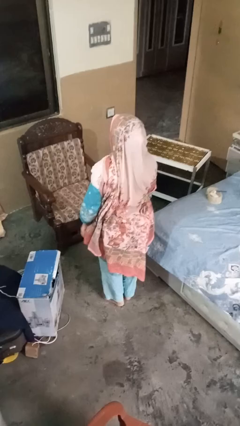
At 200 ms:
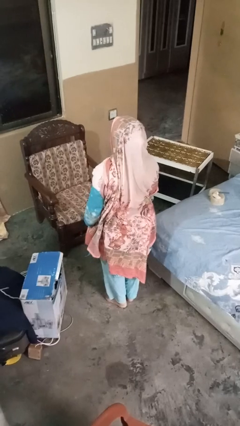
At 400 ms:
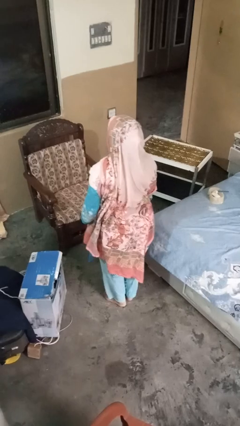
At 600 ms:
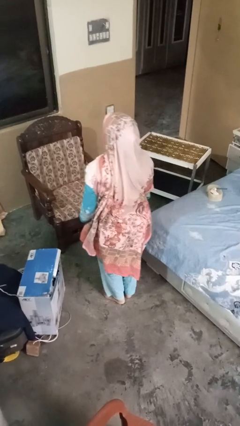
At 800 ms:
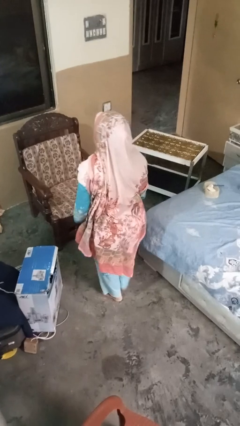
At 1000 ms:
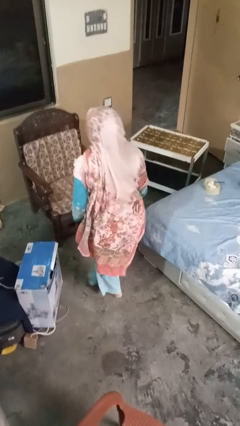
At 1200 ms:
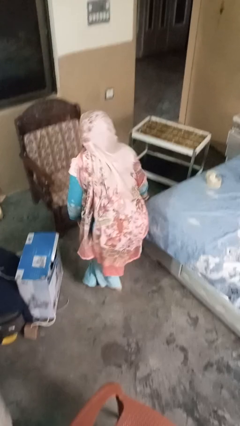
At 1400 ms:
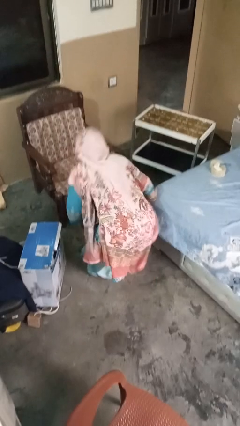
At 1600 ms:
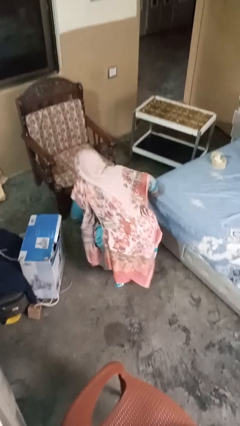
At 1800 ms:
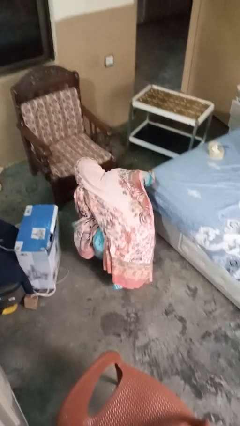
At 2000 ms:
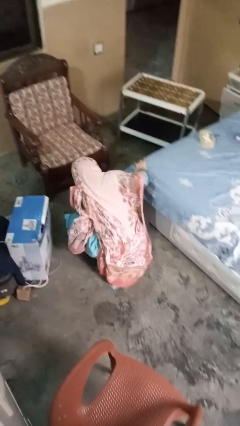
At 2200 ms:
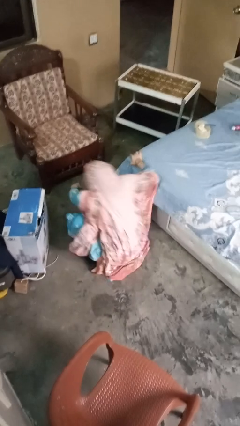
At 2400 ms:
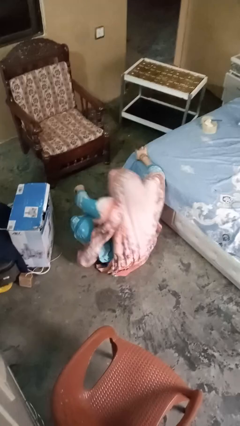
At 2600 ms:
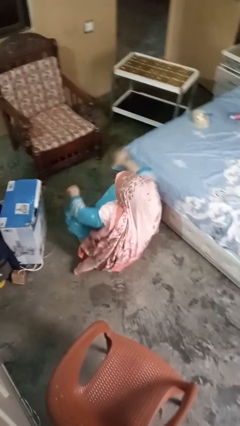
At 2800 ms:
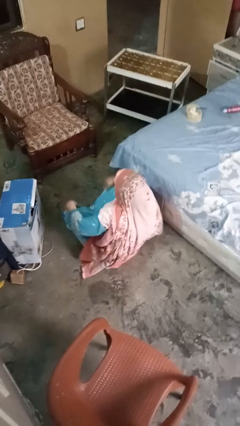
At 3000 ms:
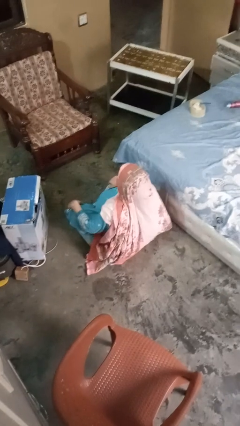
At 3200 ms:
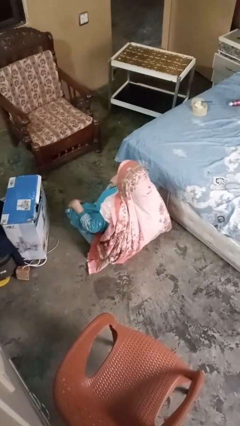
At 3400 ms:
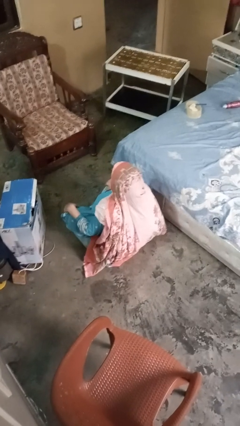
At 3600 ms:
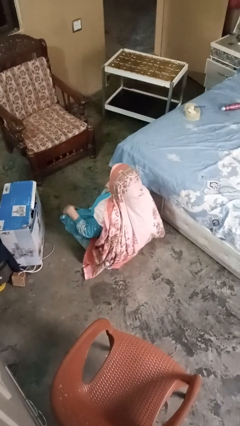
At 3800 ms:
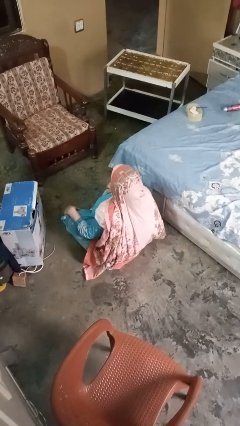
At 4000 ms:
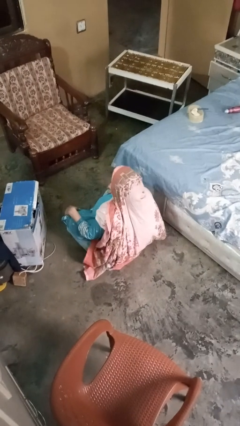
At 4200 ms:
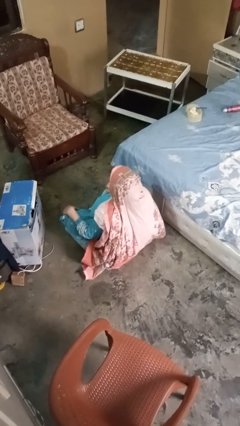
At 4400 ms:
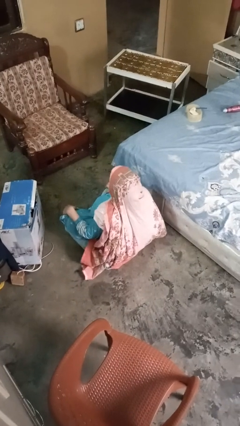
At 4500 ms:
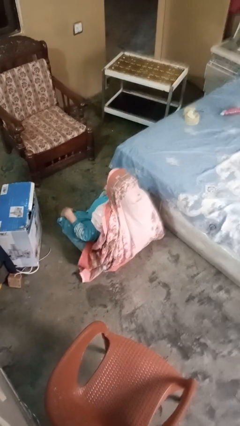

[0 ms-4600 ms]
person crosses legs

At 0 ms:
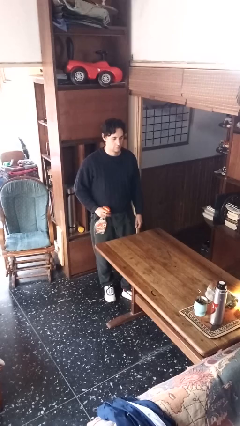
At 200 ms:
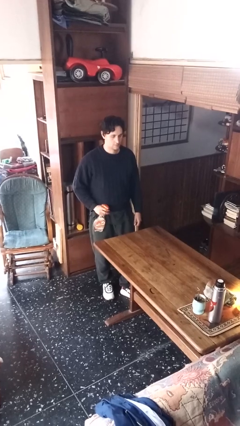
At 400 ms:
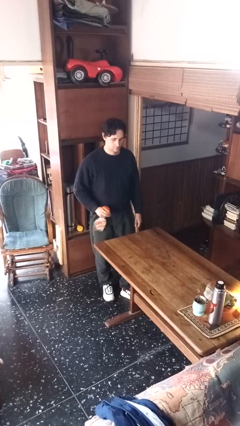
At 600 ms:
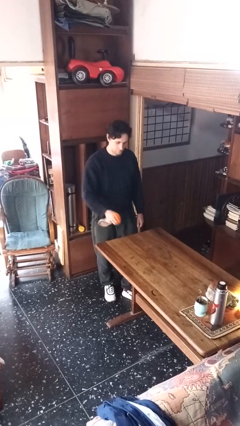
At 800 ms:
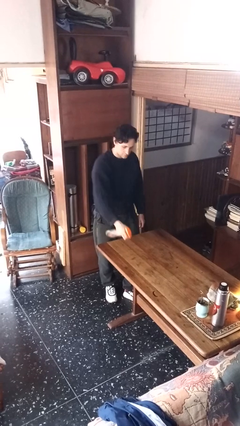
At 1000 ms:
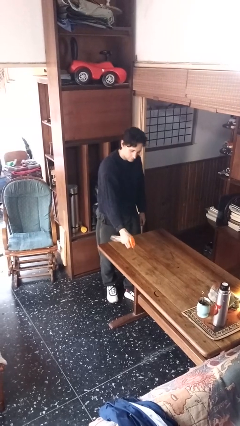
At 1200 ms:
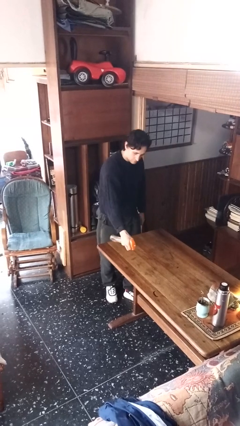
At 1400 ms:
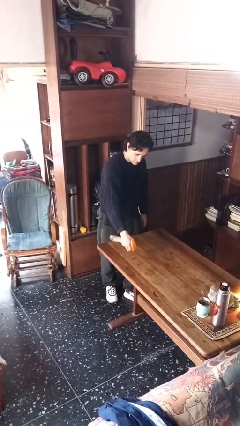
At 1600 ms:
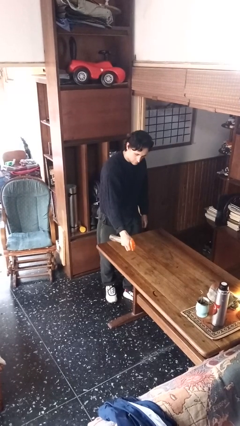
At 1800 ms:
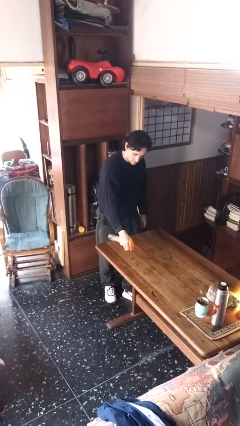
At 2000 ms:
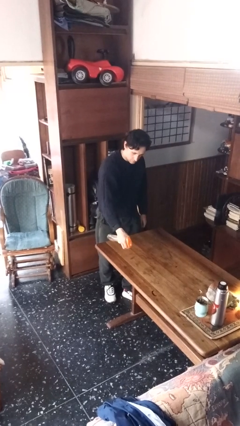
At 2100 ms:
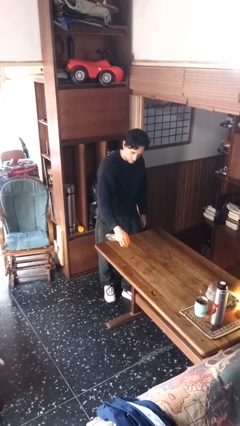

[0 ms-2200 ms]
person sprays from bottle

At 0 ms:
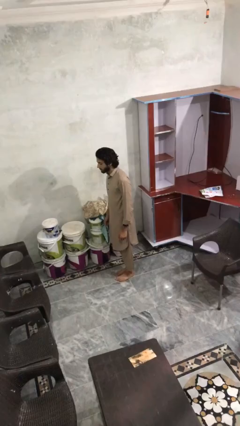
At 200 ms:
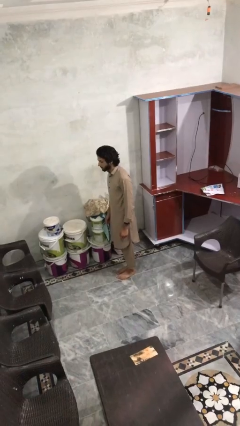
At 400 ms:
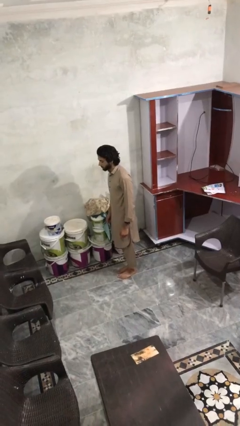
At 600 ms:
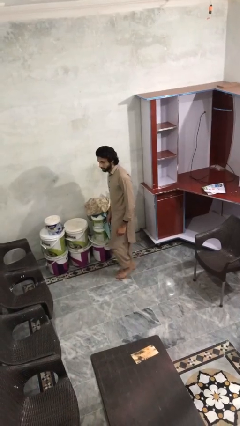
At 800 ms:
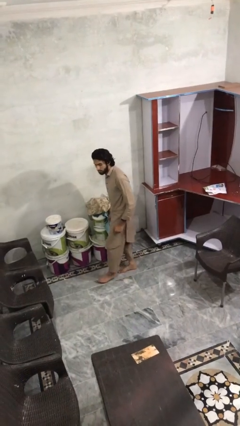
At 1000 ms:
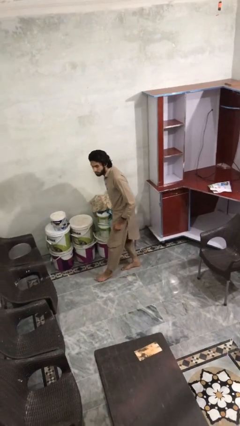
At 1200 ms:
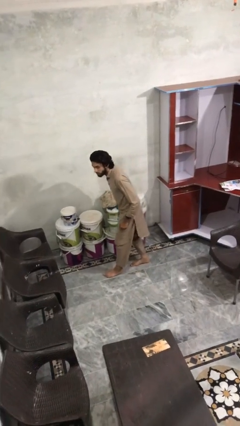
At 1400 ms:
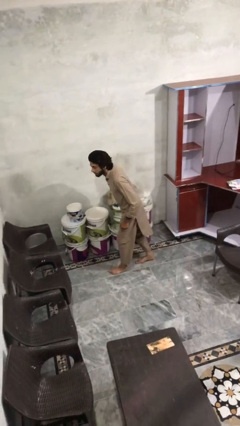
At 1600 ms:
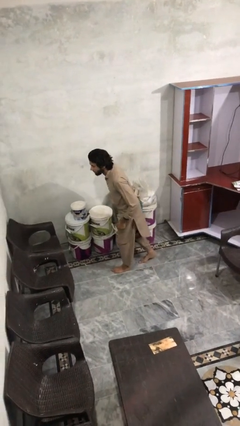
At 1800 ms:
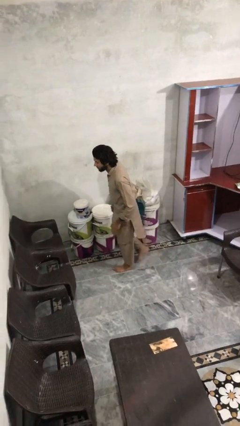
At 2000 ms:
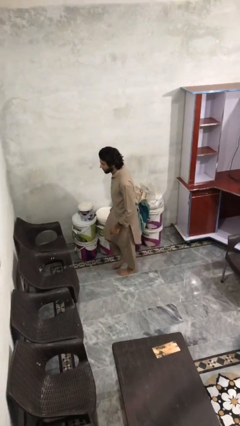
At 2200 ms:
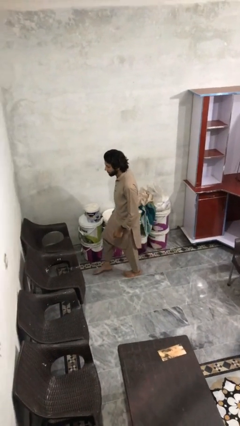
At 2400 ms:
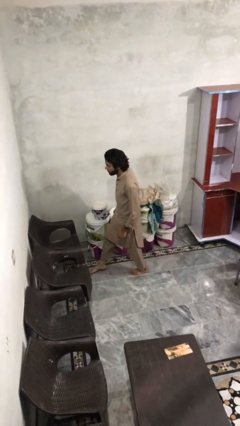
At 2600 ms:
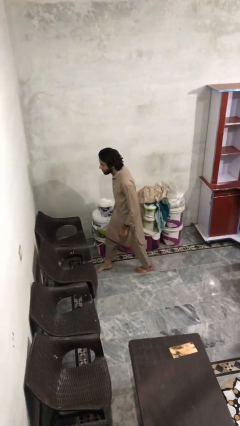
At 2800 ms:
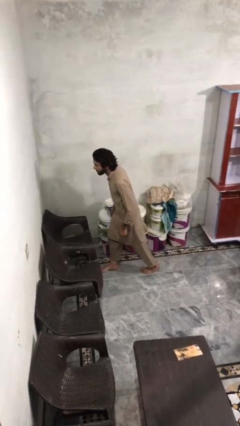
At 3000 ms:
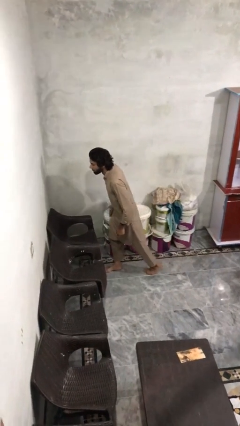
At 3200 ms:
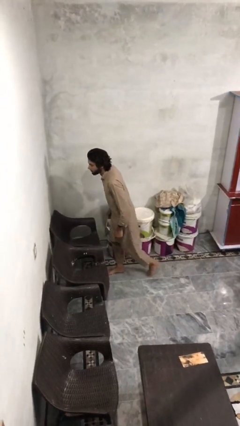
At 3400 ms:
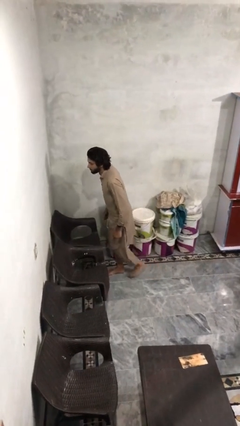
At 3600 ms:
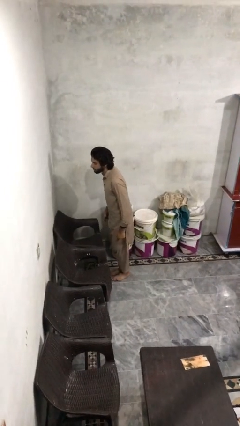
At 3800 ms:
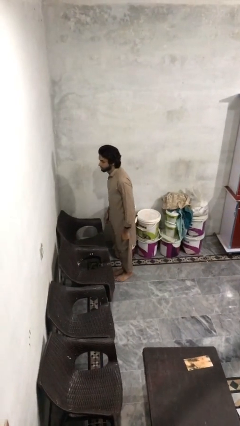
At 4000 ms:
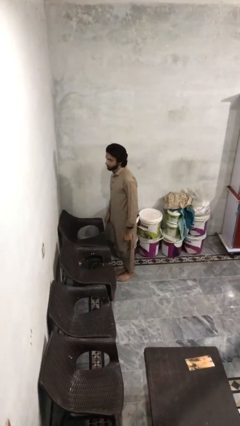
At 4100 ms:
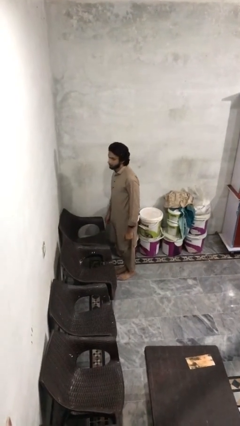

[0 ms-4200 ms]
person walks tiptoe

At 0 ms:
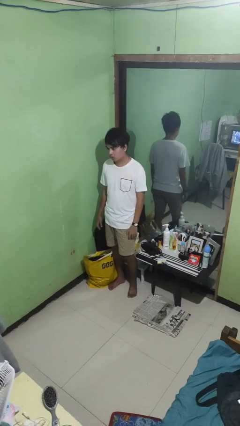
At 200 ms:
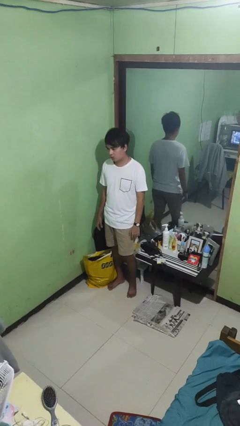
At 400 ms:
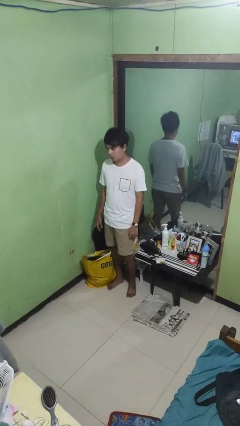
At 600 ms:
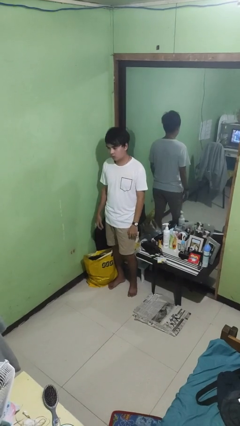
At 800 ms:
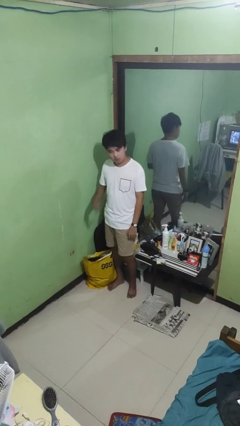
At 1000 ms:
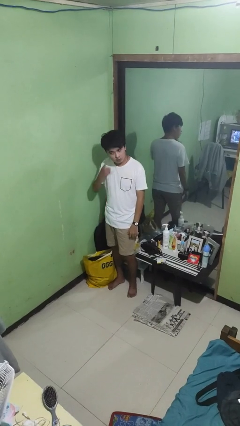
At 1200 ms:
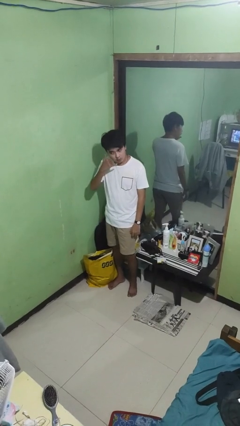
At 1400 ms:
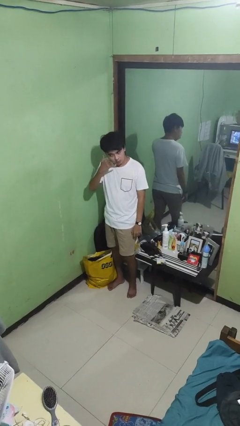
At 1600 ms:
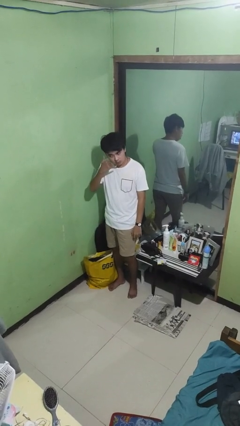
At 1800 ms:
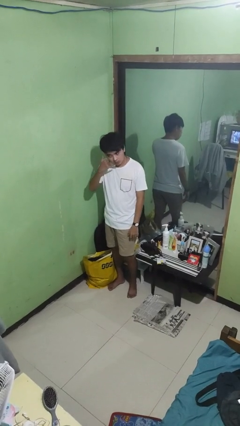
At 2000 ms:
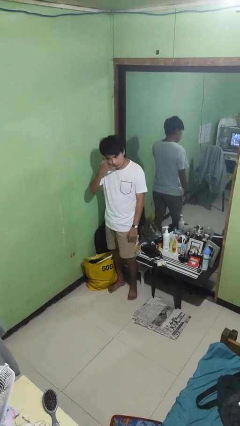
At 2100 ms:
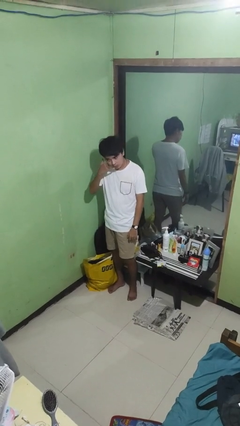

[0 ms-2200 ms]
person gestures call me

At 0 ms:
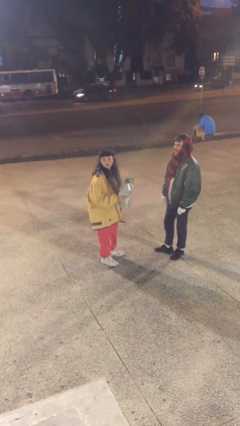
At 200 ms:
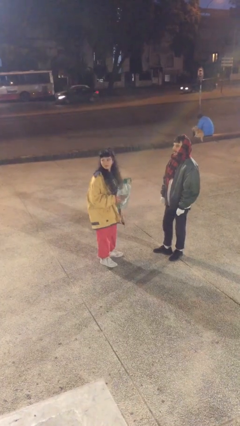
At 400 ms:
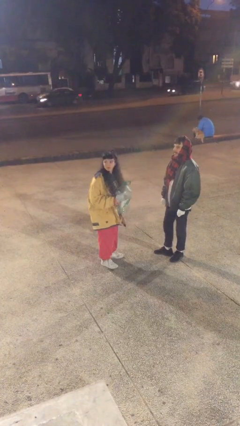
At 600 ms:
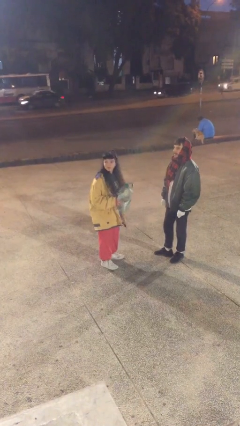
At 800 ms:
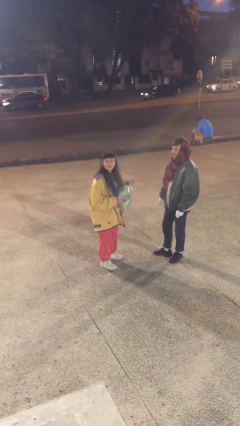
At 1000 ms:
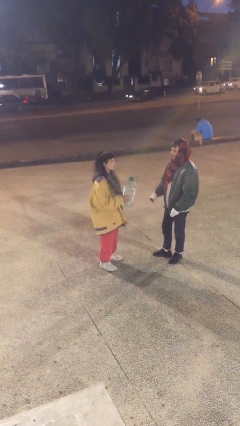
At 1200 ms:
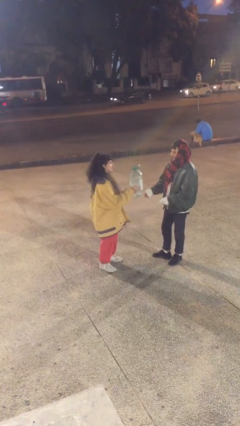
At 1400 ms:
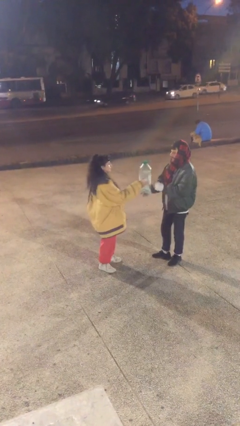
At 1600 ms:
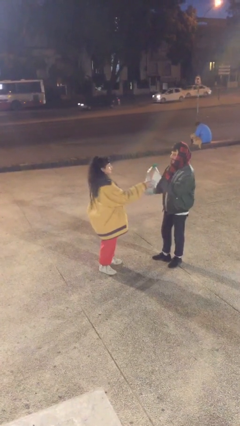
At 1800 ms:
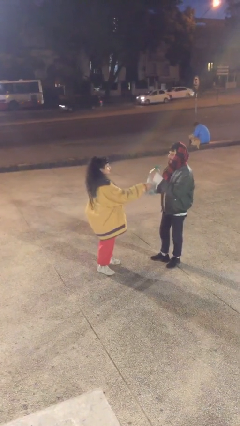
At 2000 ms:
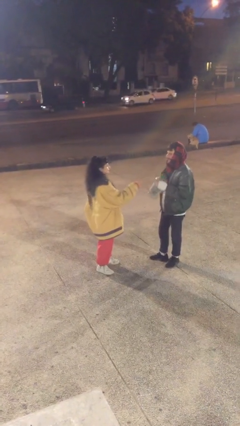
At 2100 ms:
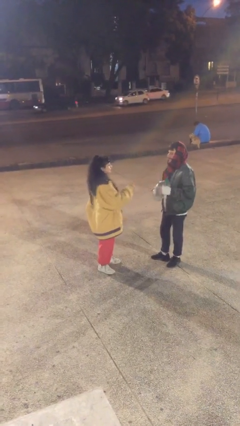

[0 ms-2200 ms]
person transfers object to person

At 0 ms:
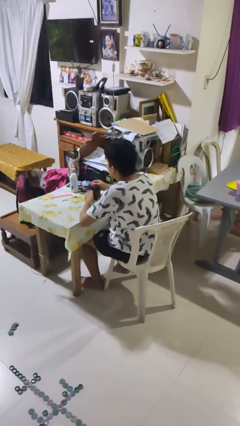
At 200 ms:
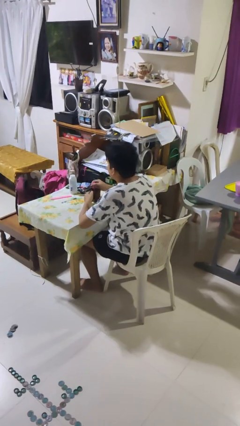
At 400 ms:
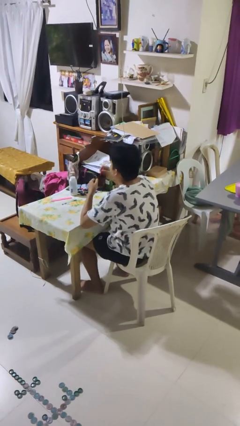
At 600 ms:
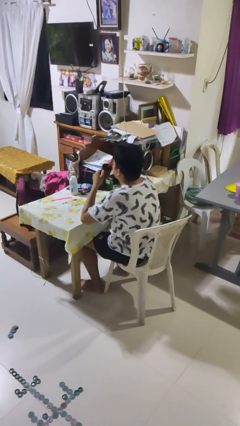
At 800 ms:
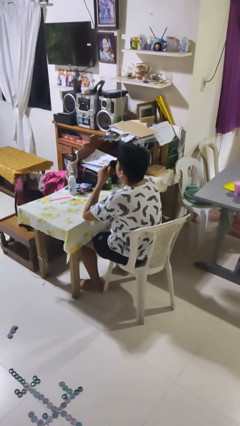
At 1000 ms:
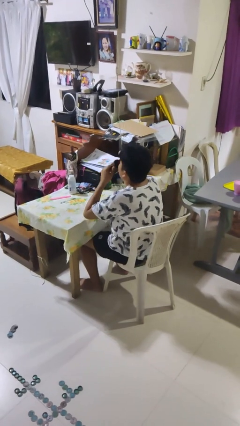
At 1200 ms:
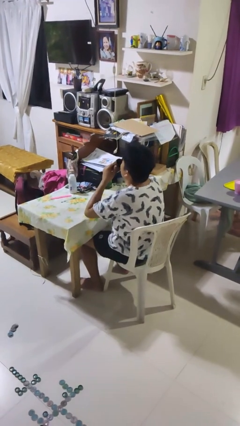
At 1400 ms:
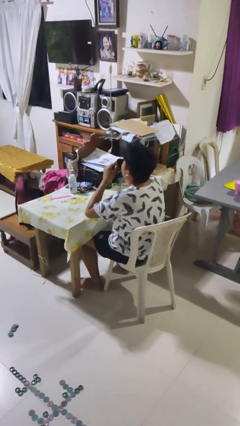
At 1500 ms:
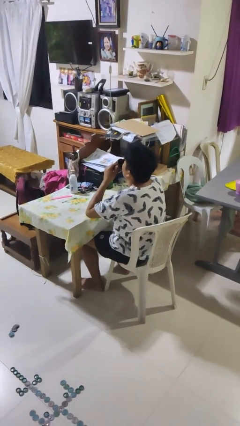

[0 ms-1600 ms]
person drinks from mug

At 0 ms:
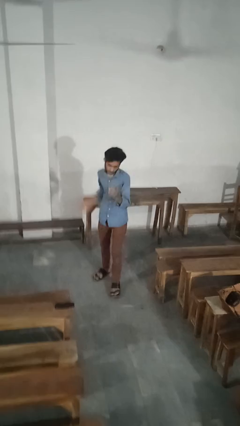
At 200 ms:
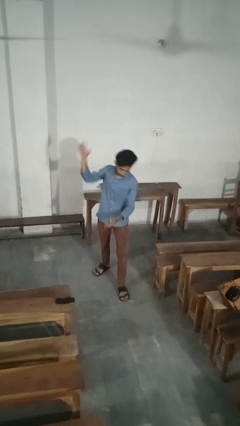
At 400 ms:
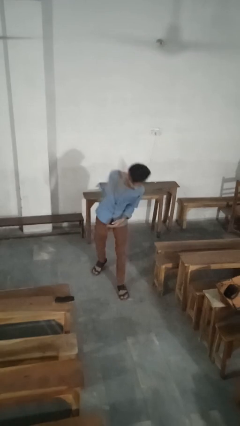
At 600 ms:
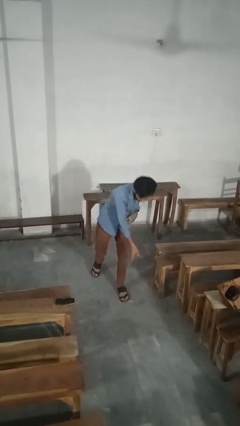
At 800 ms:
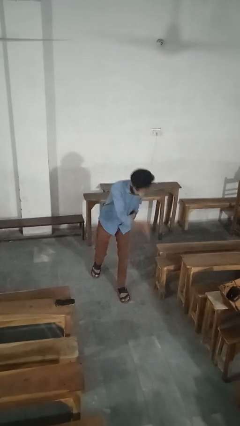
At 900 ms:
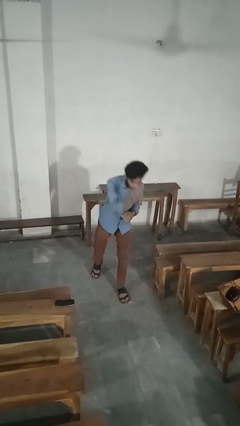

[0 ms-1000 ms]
person karate chop
